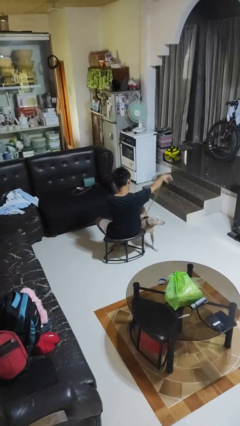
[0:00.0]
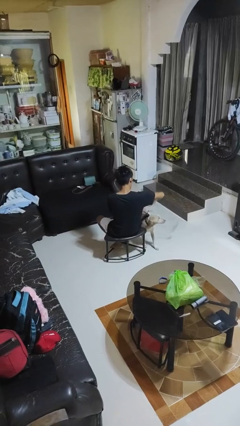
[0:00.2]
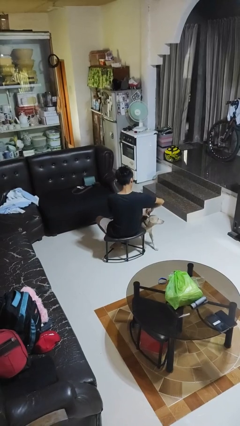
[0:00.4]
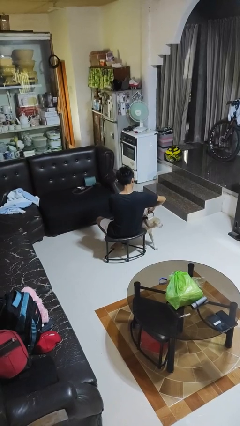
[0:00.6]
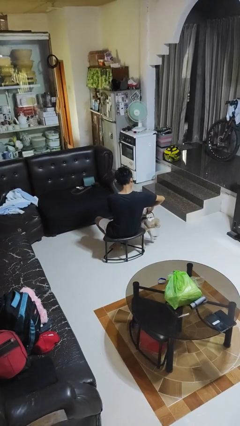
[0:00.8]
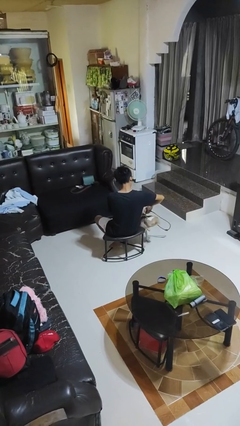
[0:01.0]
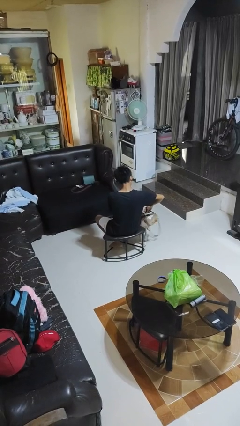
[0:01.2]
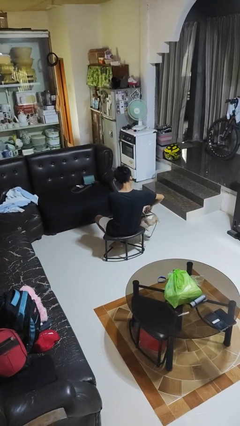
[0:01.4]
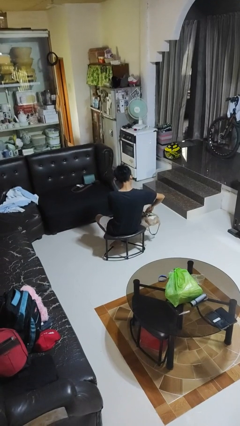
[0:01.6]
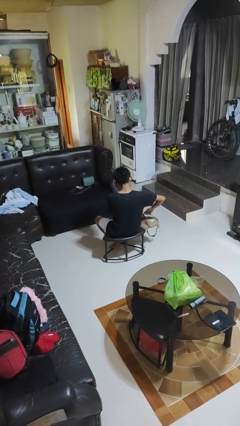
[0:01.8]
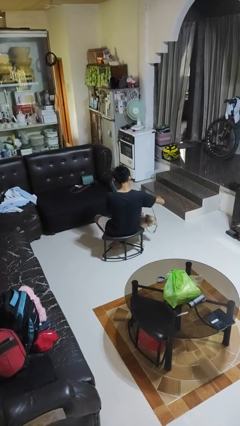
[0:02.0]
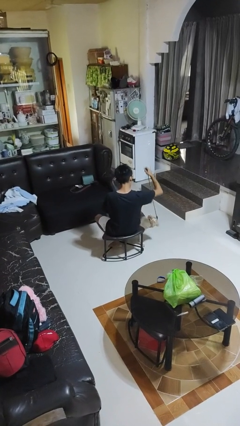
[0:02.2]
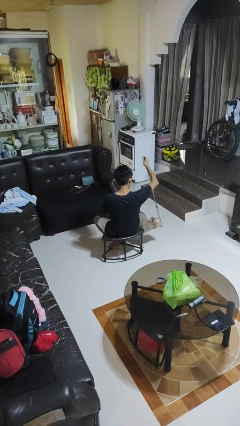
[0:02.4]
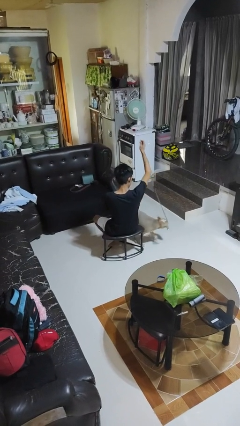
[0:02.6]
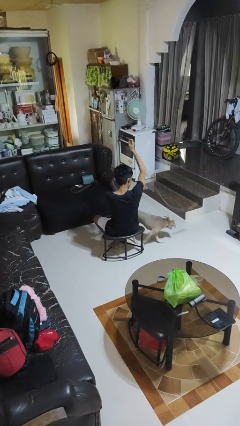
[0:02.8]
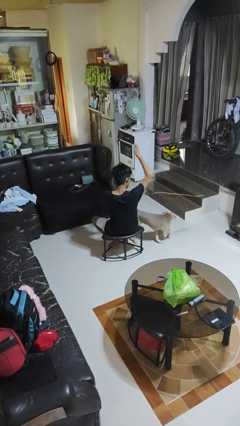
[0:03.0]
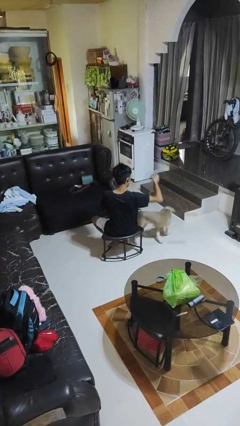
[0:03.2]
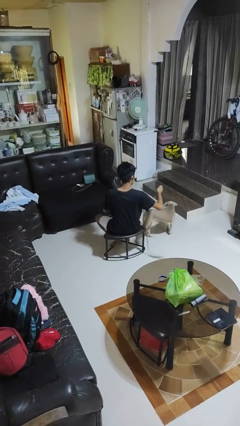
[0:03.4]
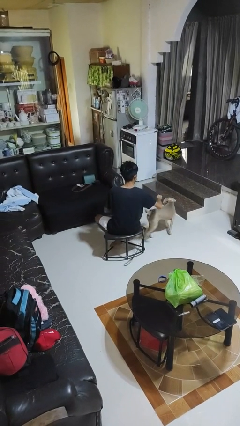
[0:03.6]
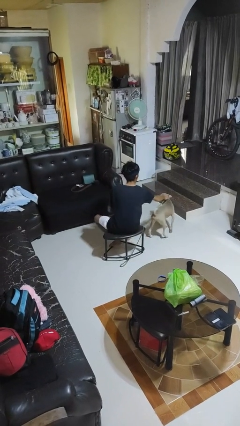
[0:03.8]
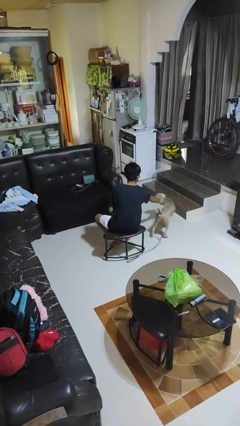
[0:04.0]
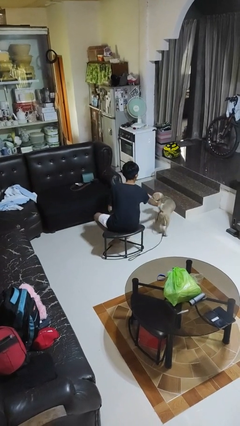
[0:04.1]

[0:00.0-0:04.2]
person unattaches leash from dog

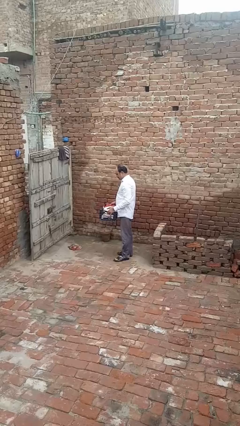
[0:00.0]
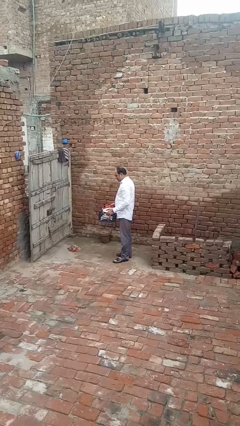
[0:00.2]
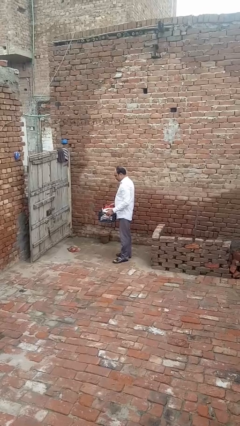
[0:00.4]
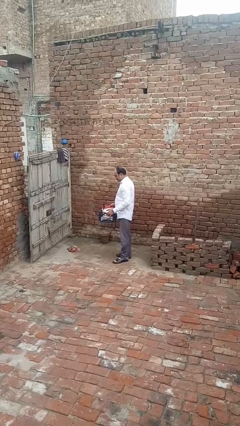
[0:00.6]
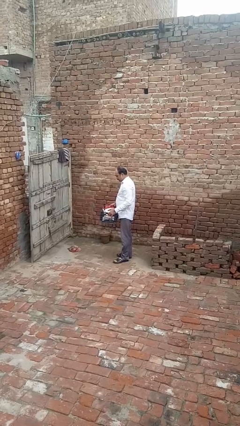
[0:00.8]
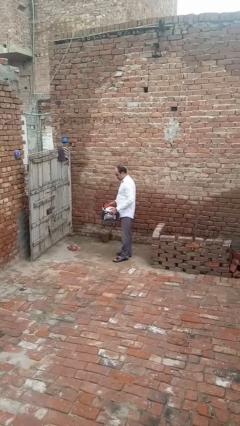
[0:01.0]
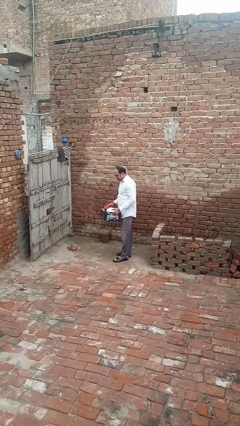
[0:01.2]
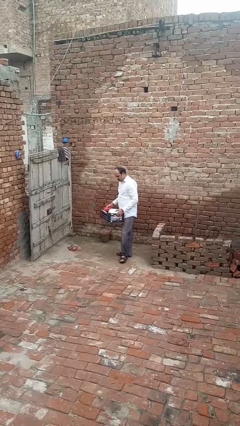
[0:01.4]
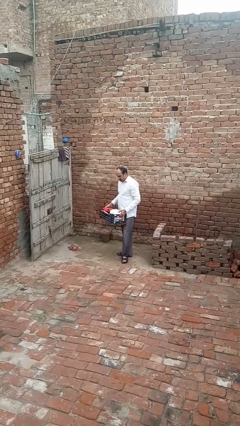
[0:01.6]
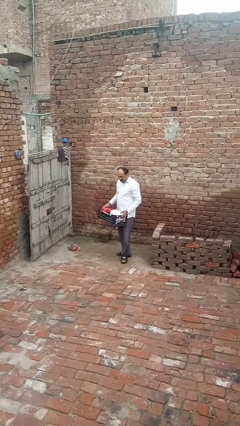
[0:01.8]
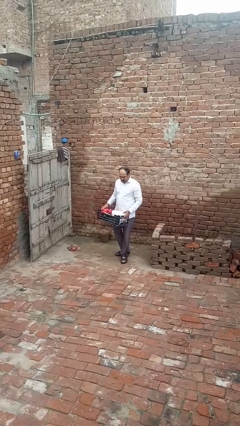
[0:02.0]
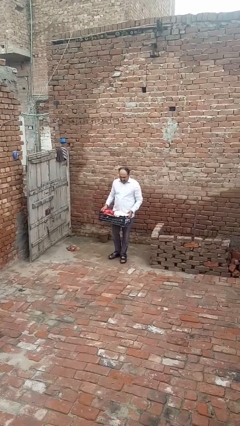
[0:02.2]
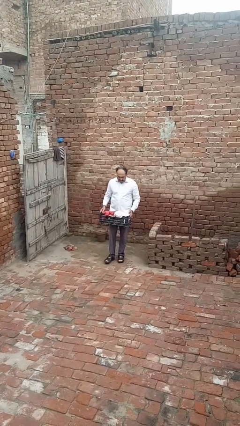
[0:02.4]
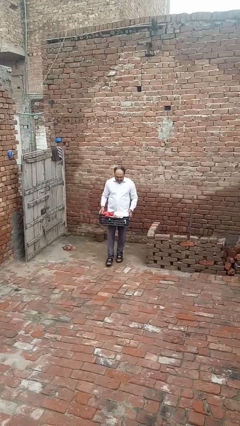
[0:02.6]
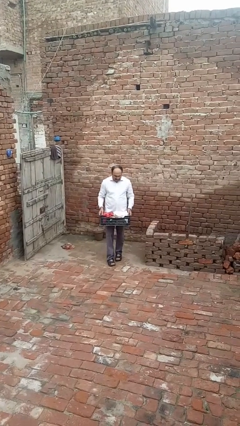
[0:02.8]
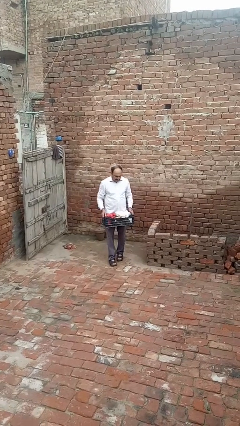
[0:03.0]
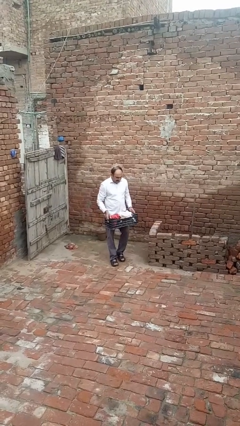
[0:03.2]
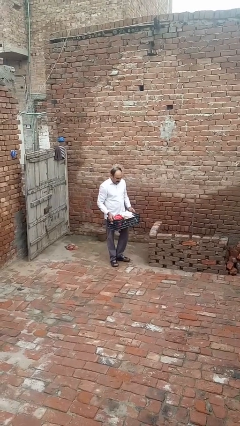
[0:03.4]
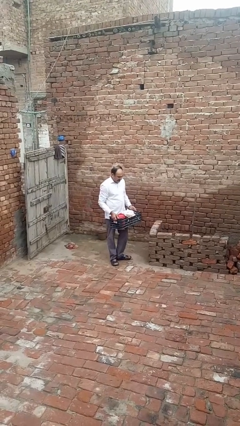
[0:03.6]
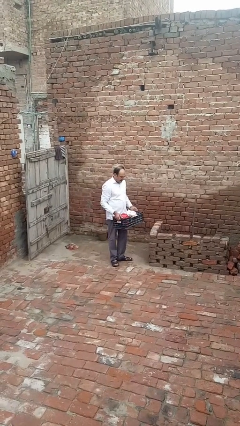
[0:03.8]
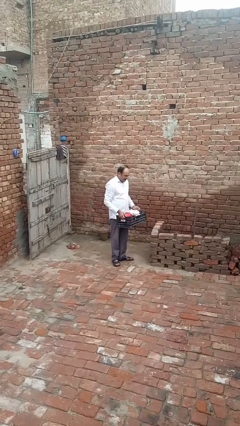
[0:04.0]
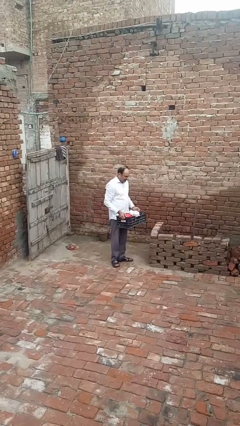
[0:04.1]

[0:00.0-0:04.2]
person carries laundry basket

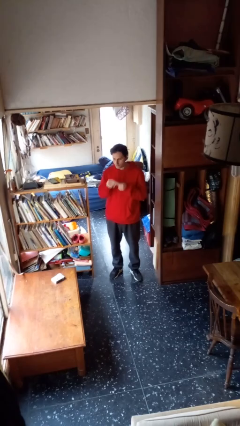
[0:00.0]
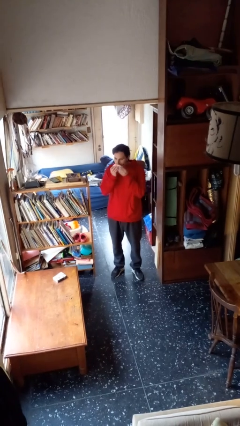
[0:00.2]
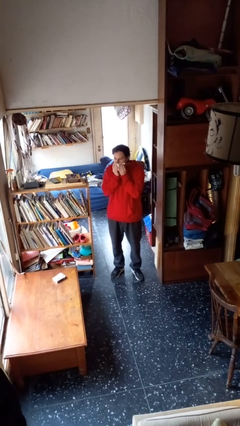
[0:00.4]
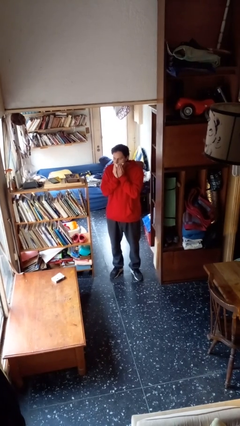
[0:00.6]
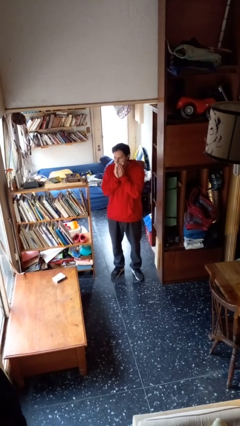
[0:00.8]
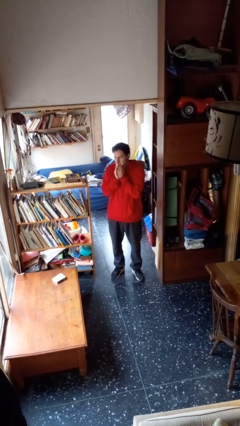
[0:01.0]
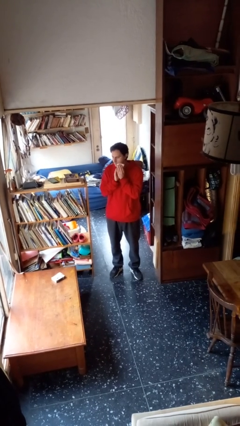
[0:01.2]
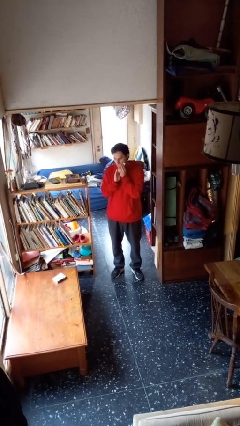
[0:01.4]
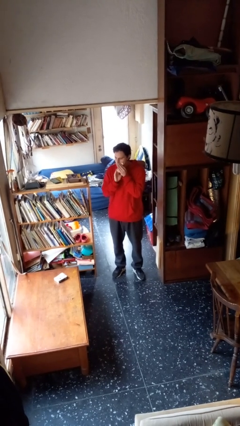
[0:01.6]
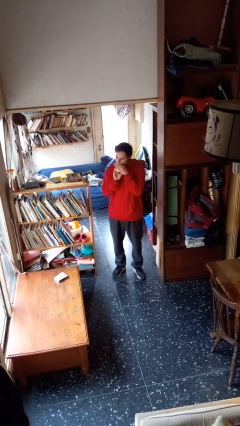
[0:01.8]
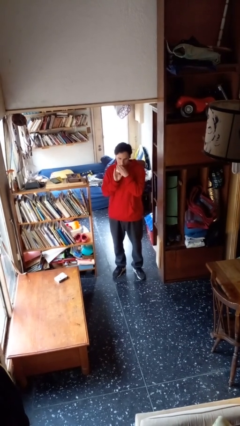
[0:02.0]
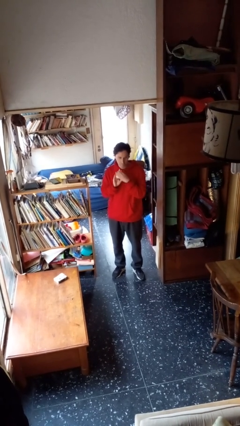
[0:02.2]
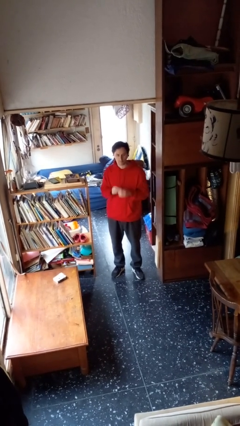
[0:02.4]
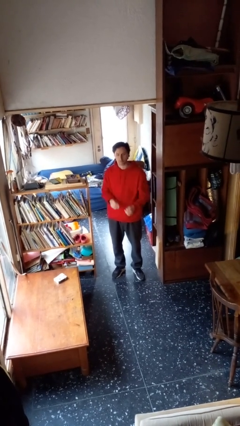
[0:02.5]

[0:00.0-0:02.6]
person wipes mouth with napkin

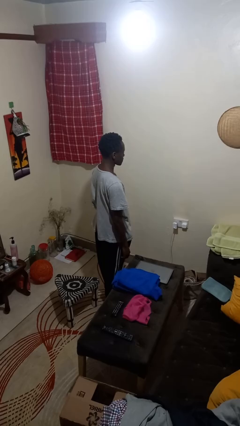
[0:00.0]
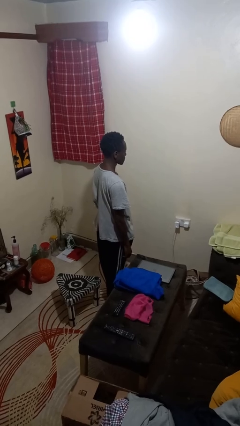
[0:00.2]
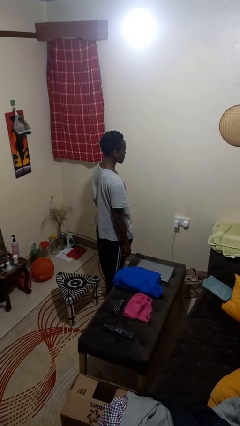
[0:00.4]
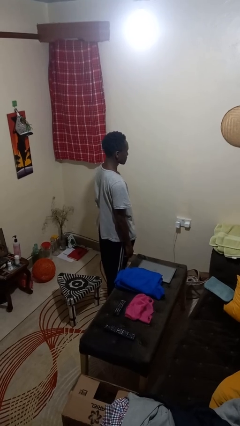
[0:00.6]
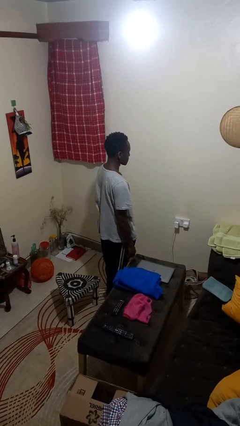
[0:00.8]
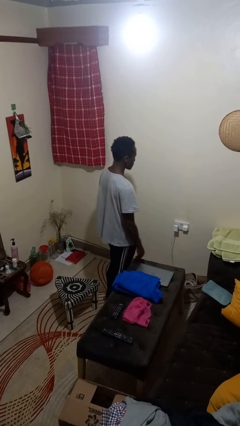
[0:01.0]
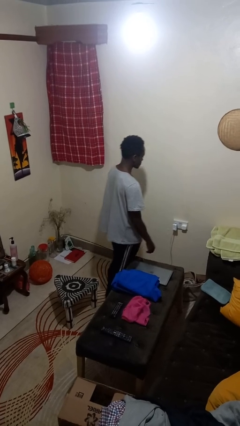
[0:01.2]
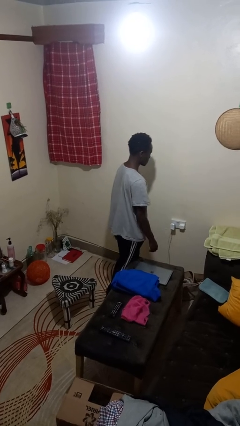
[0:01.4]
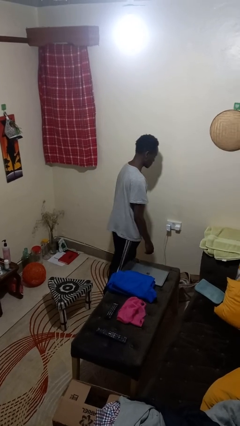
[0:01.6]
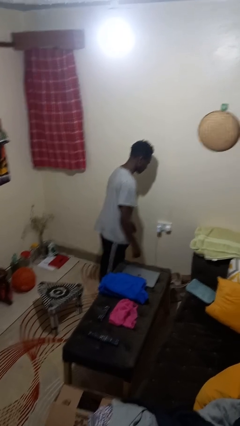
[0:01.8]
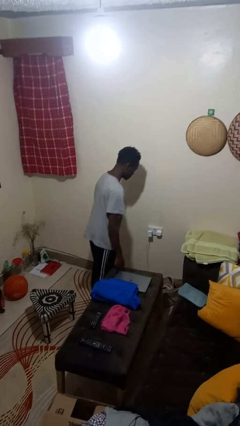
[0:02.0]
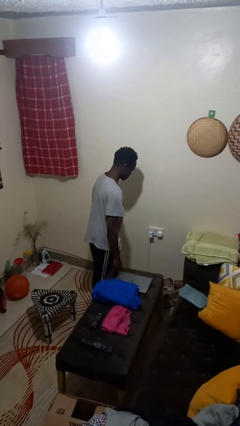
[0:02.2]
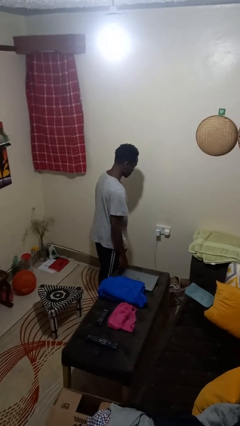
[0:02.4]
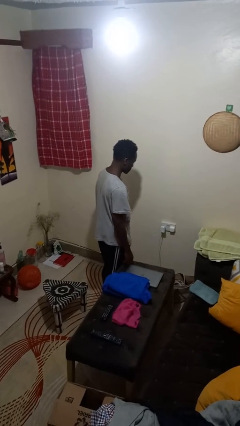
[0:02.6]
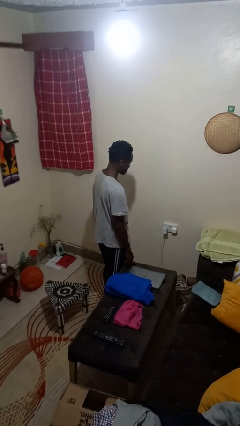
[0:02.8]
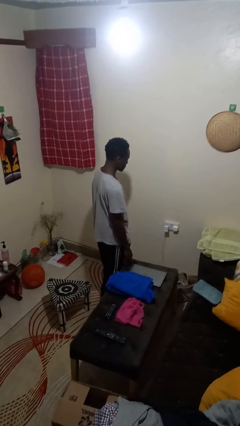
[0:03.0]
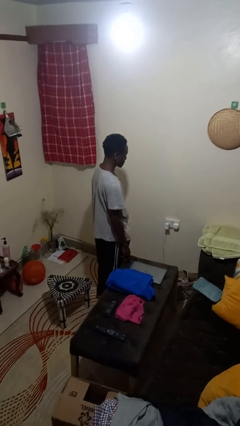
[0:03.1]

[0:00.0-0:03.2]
person bumps into table

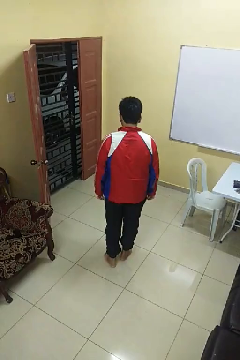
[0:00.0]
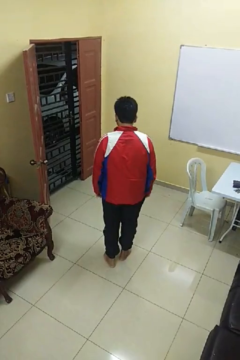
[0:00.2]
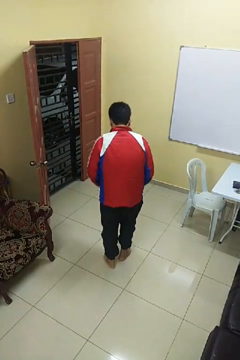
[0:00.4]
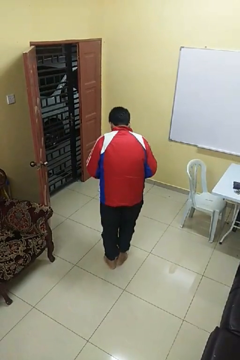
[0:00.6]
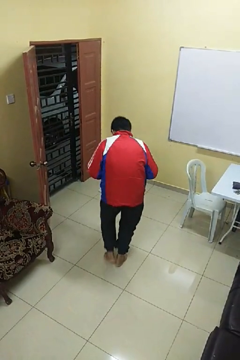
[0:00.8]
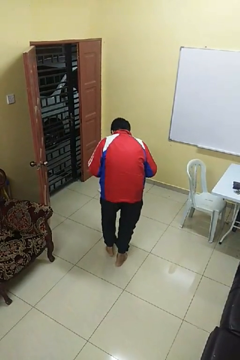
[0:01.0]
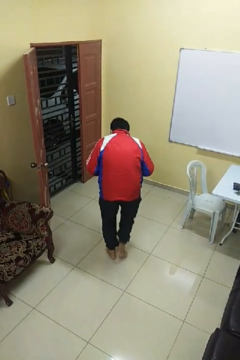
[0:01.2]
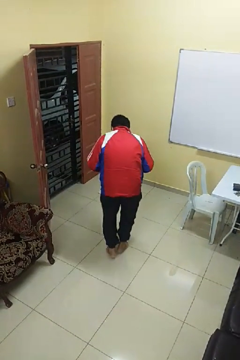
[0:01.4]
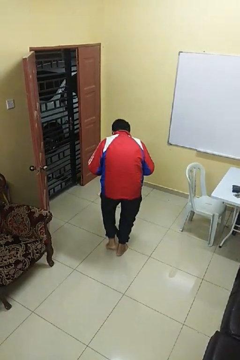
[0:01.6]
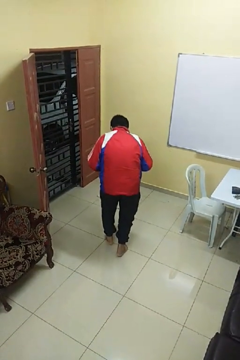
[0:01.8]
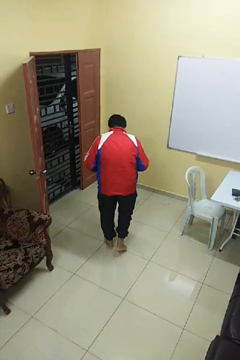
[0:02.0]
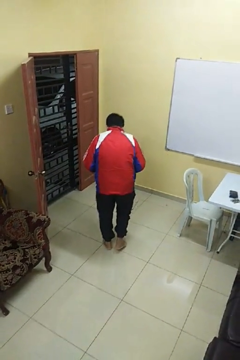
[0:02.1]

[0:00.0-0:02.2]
person walks tiptoe

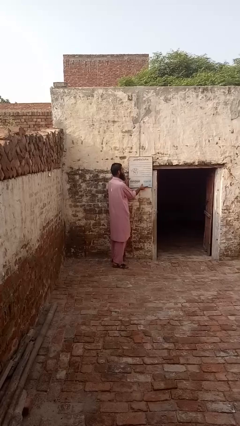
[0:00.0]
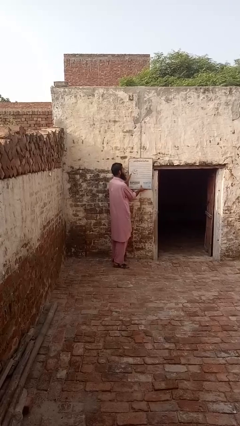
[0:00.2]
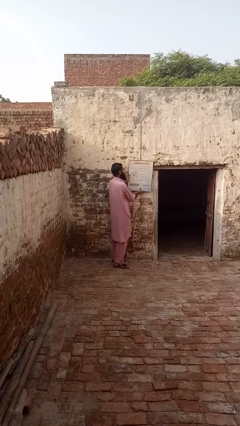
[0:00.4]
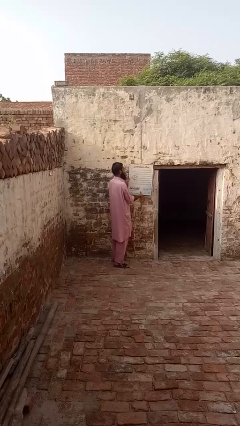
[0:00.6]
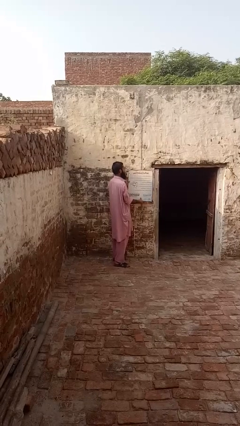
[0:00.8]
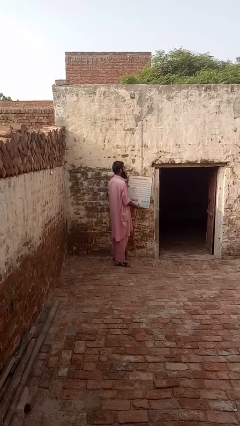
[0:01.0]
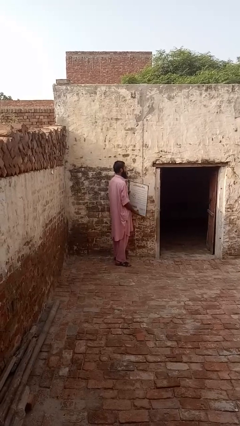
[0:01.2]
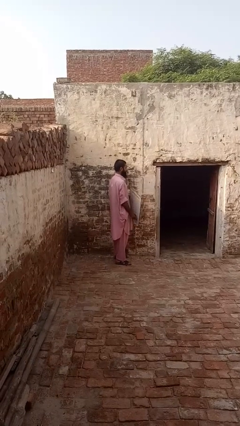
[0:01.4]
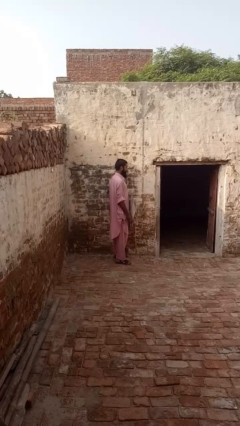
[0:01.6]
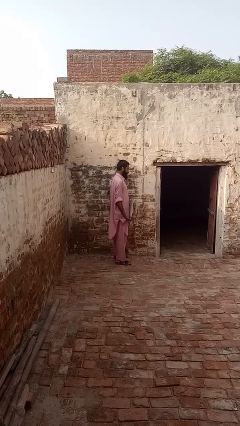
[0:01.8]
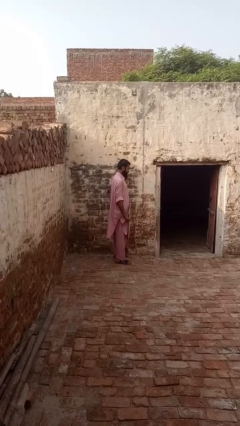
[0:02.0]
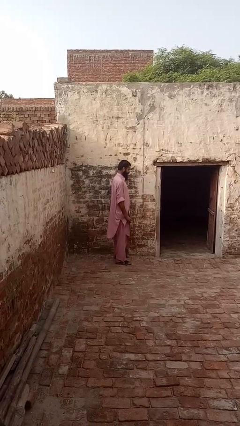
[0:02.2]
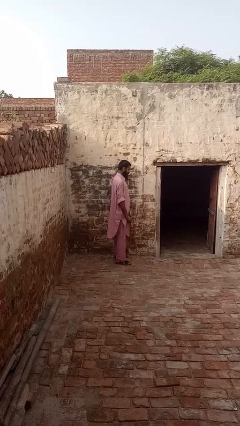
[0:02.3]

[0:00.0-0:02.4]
person takes down picture frame
